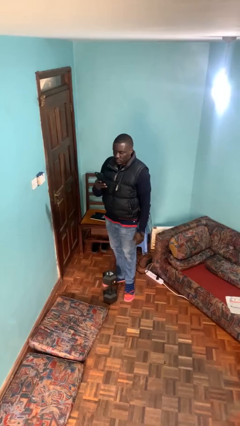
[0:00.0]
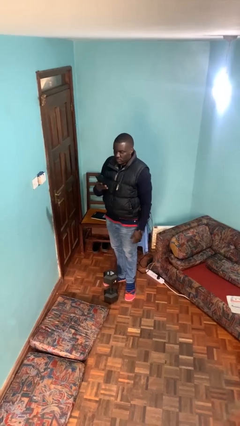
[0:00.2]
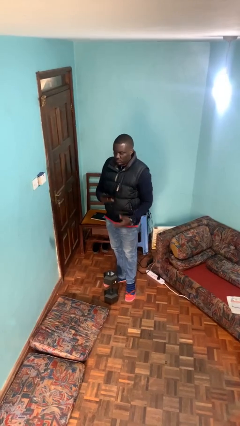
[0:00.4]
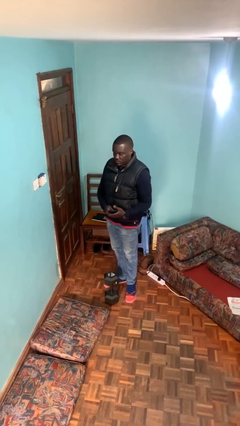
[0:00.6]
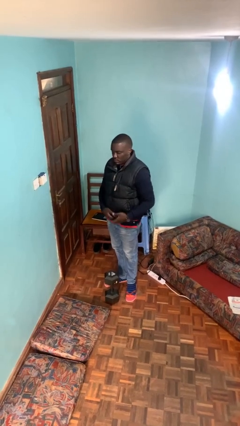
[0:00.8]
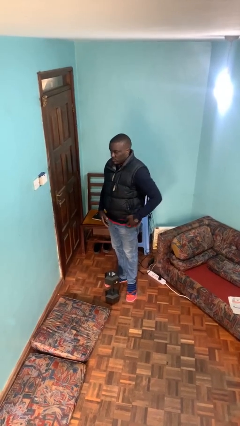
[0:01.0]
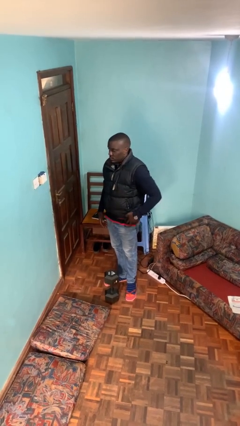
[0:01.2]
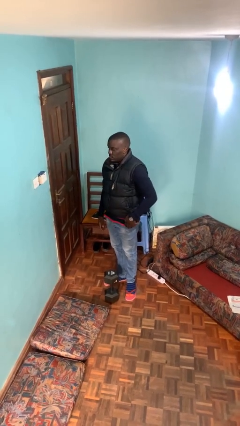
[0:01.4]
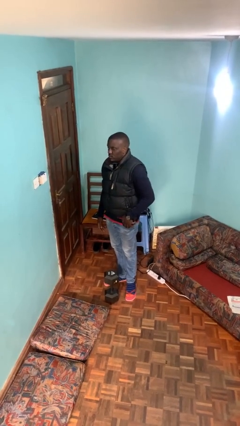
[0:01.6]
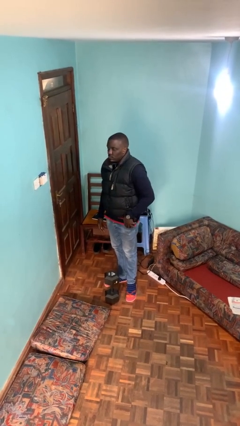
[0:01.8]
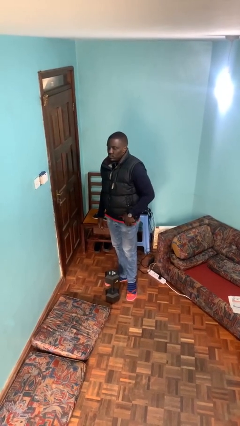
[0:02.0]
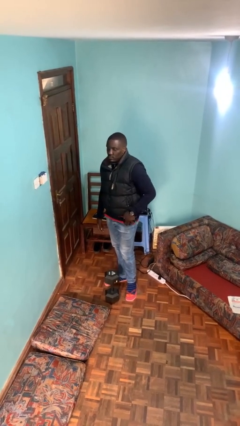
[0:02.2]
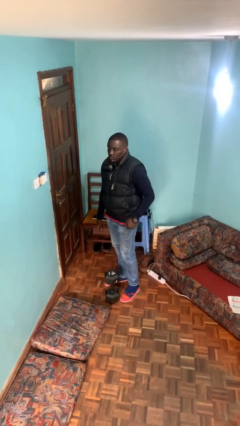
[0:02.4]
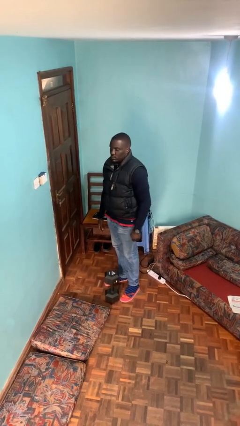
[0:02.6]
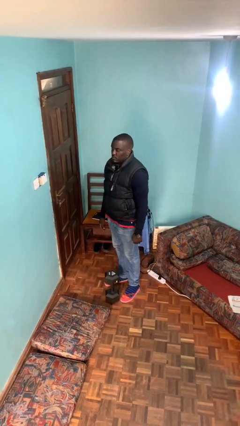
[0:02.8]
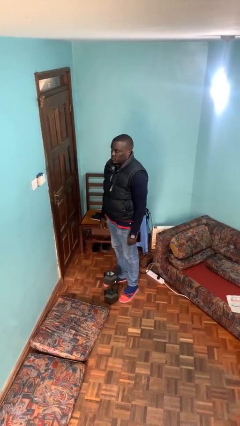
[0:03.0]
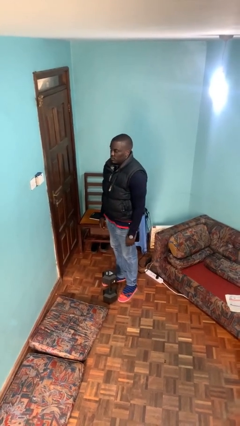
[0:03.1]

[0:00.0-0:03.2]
person puts phone into pocket

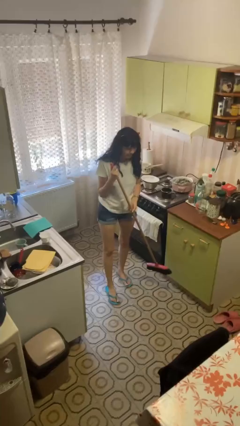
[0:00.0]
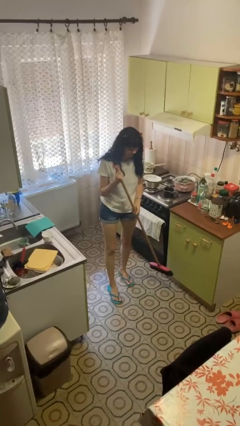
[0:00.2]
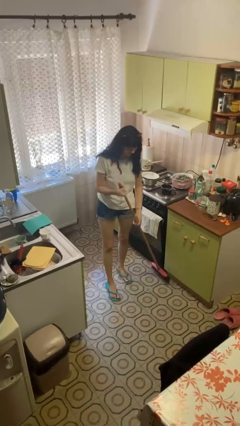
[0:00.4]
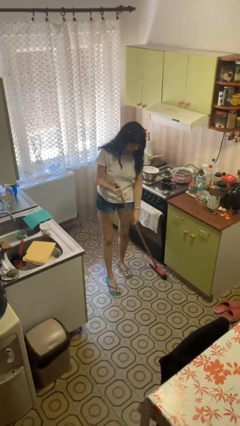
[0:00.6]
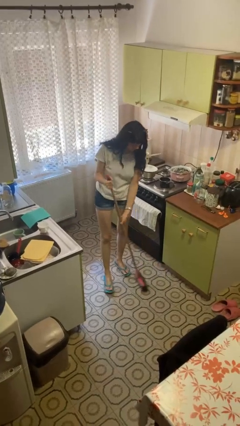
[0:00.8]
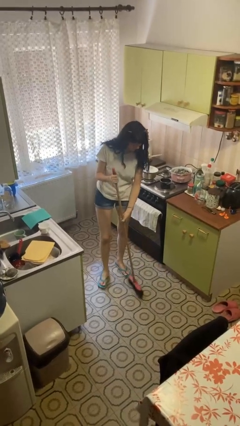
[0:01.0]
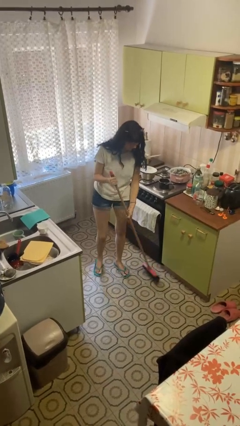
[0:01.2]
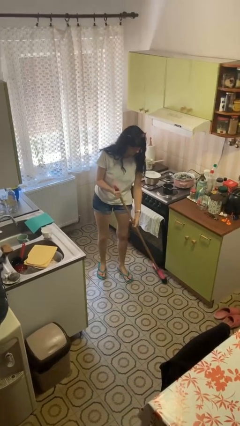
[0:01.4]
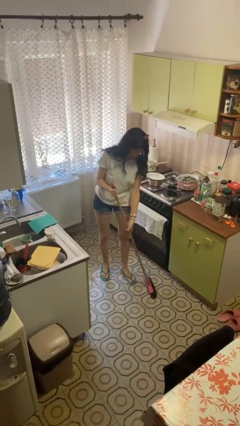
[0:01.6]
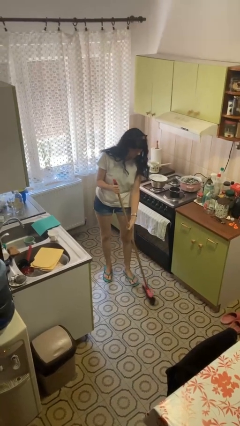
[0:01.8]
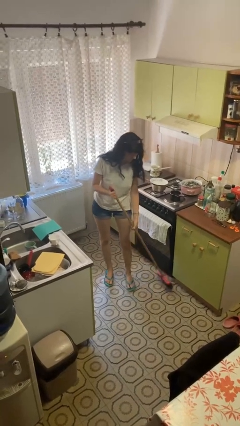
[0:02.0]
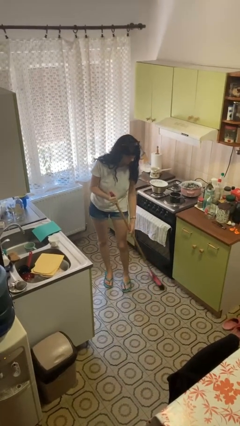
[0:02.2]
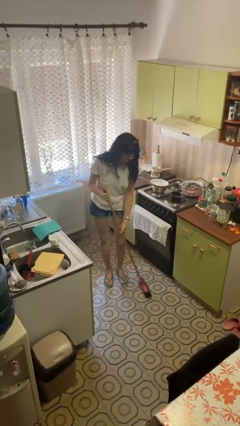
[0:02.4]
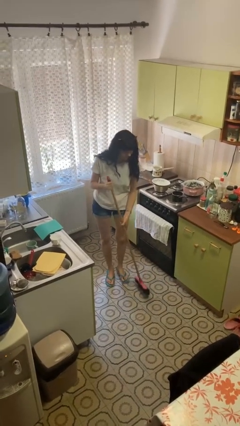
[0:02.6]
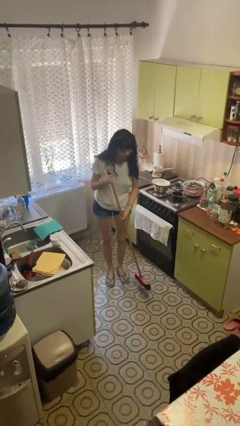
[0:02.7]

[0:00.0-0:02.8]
person sweeps floor

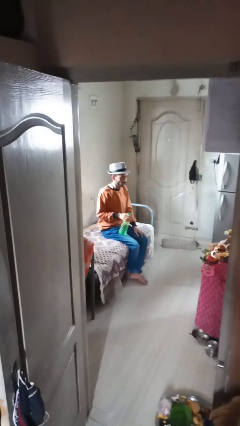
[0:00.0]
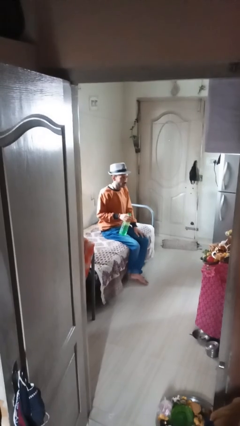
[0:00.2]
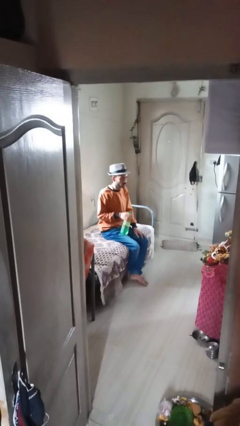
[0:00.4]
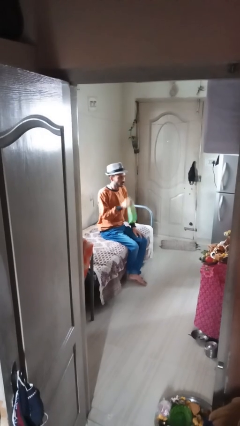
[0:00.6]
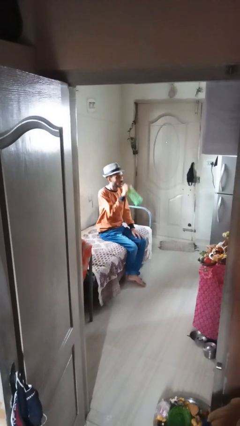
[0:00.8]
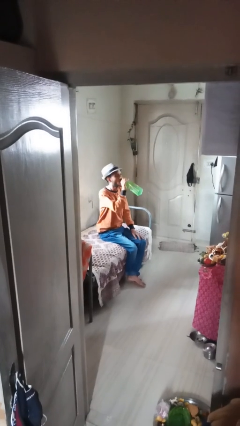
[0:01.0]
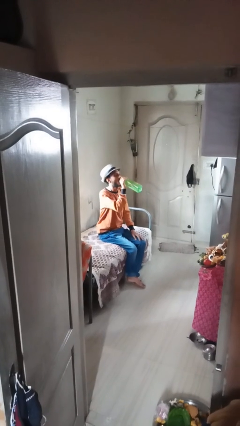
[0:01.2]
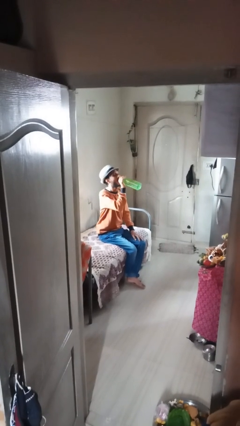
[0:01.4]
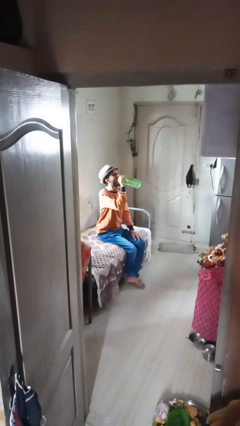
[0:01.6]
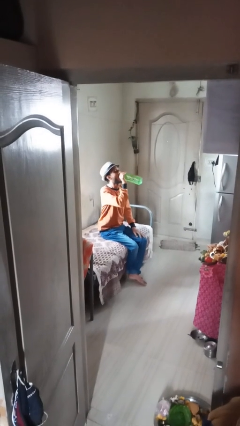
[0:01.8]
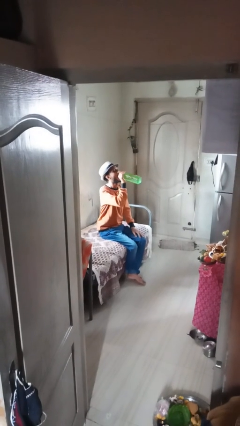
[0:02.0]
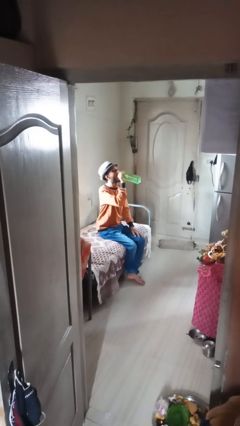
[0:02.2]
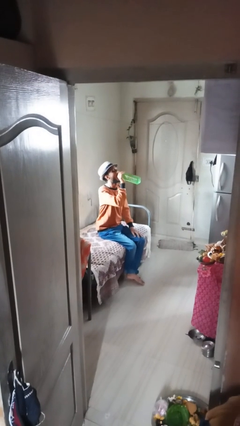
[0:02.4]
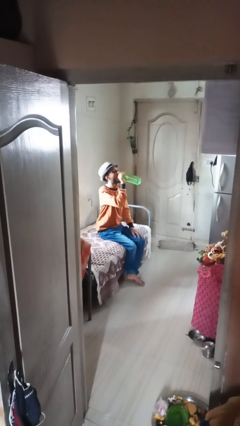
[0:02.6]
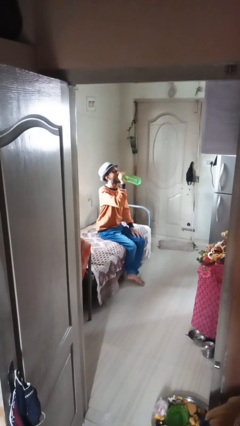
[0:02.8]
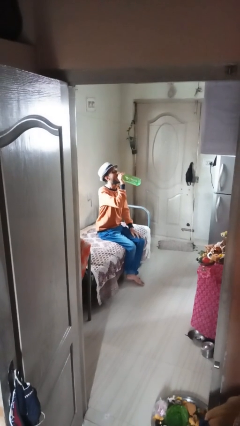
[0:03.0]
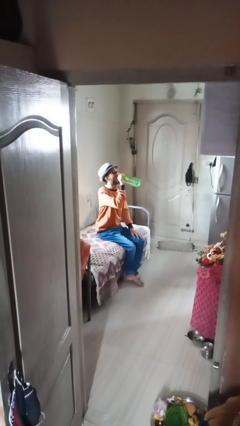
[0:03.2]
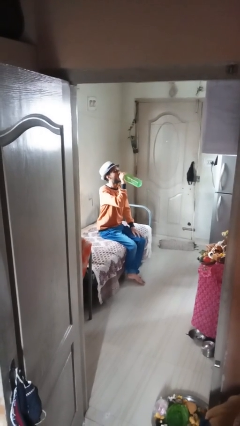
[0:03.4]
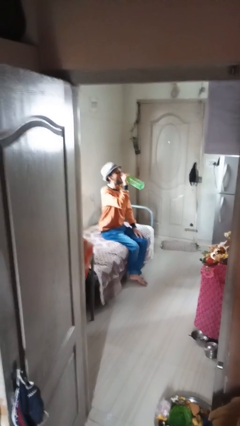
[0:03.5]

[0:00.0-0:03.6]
person drinks from bottle

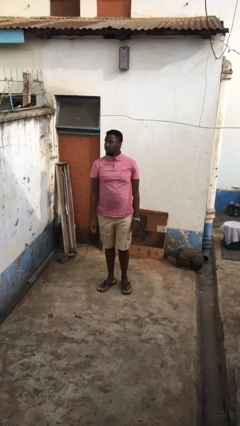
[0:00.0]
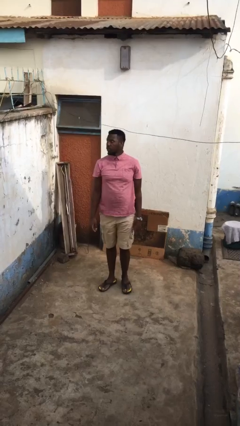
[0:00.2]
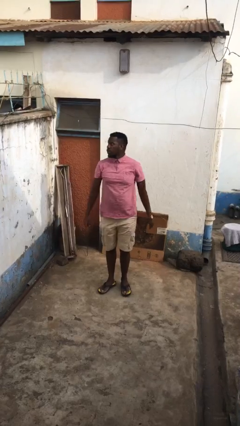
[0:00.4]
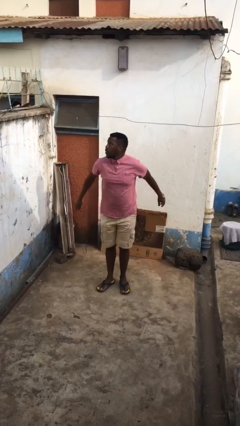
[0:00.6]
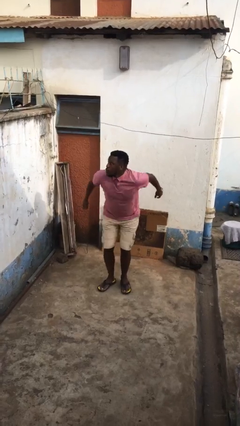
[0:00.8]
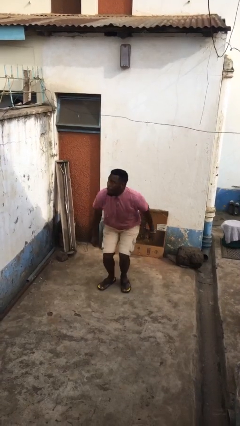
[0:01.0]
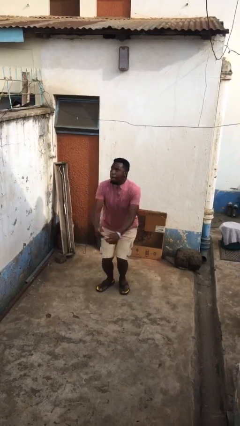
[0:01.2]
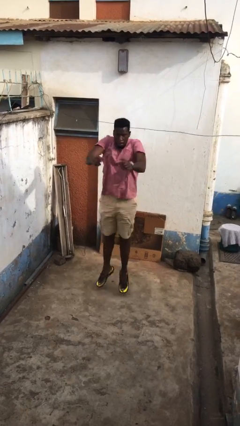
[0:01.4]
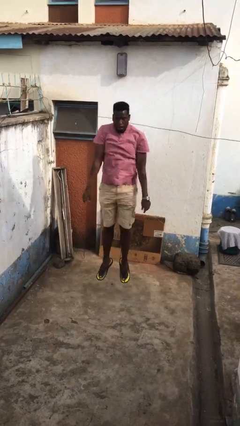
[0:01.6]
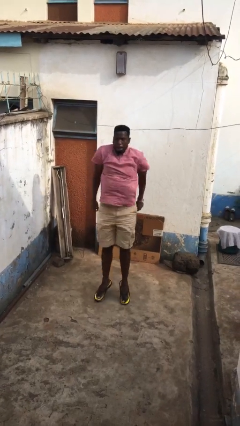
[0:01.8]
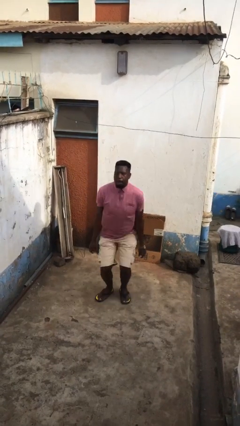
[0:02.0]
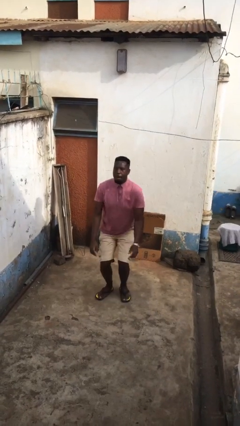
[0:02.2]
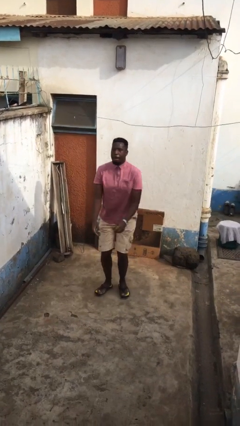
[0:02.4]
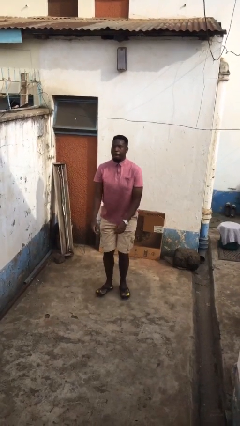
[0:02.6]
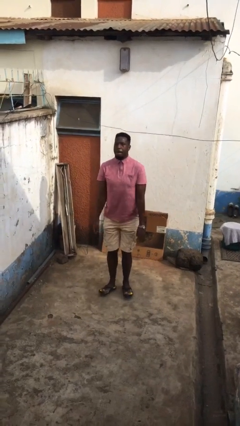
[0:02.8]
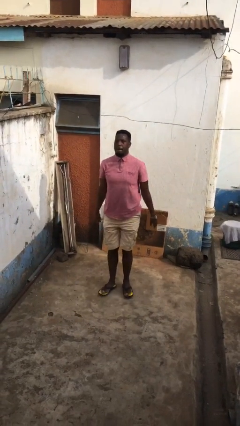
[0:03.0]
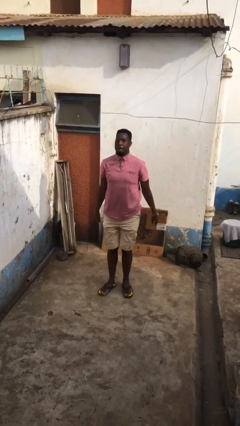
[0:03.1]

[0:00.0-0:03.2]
person jumps

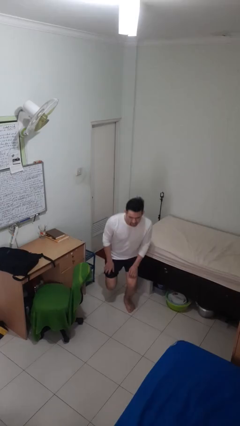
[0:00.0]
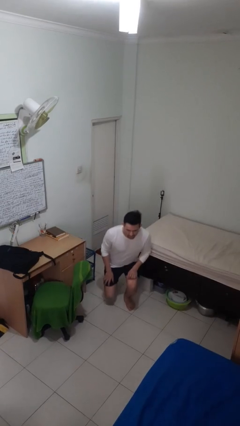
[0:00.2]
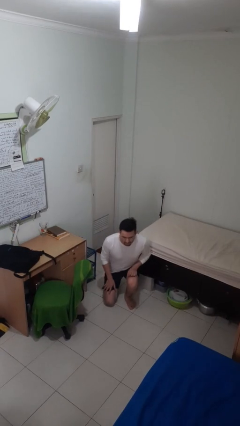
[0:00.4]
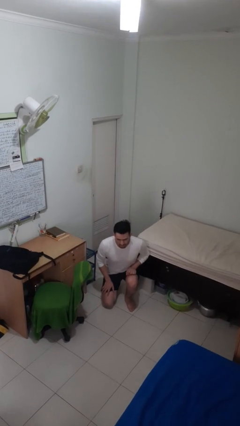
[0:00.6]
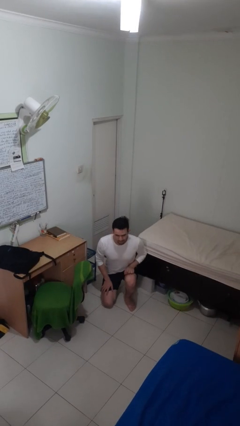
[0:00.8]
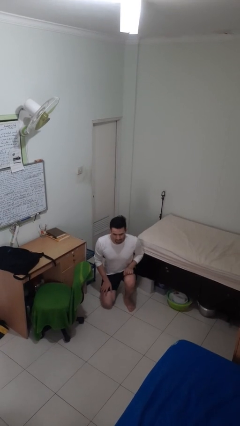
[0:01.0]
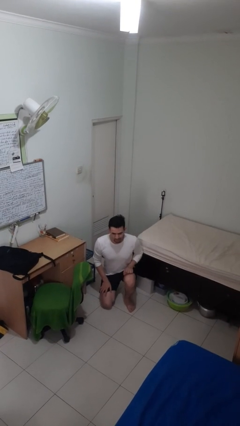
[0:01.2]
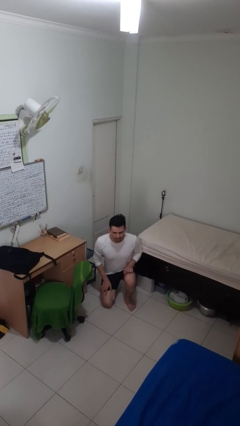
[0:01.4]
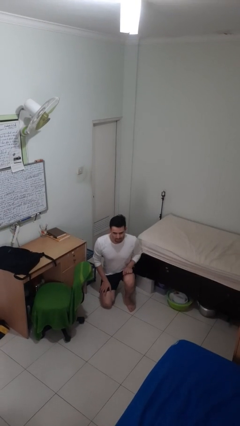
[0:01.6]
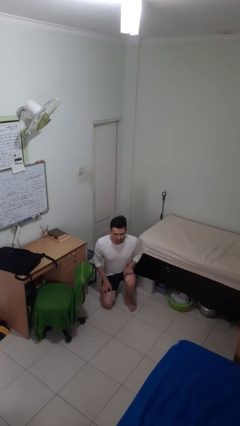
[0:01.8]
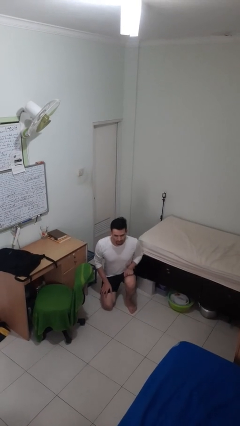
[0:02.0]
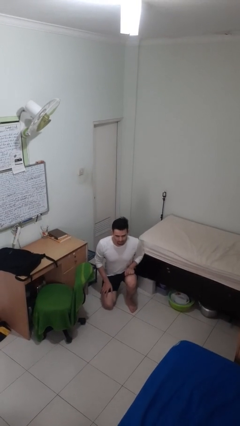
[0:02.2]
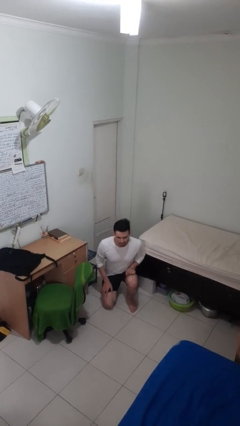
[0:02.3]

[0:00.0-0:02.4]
person kneels

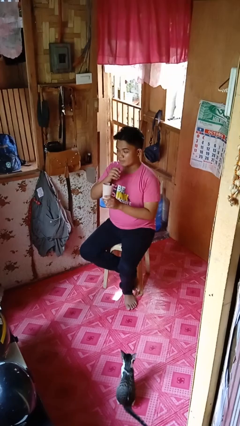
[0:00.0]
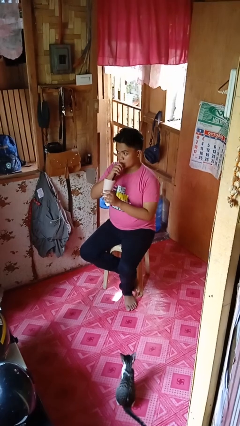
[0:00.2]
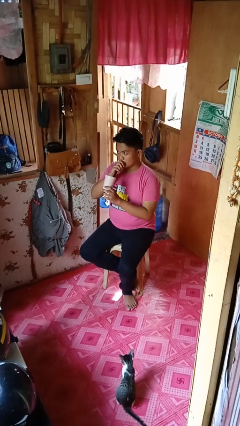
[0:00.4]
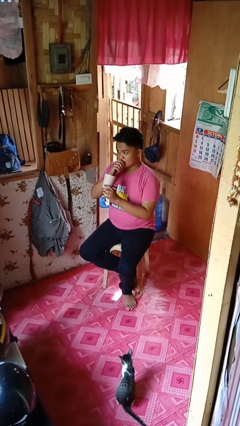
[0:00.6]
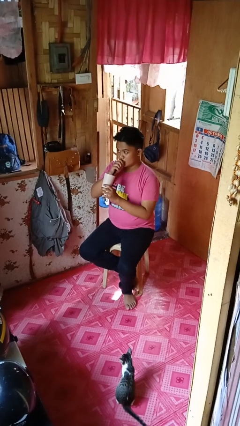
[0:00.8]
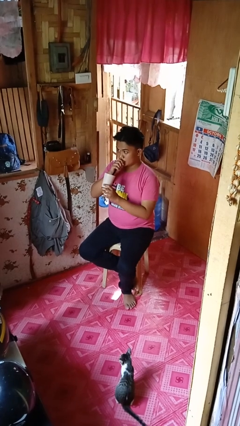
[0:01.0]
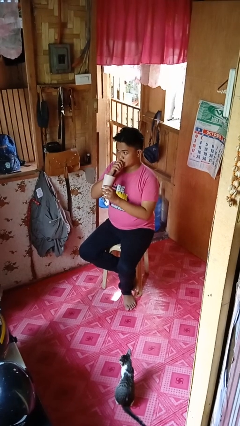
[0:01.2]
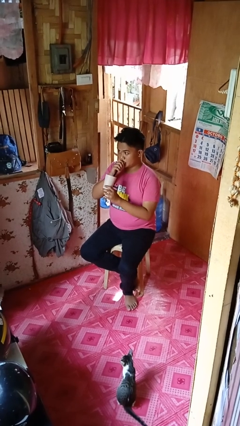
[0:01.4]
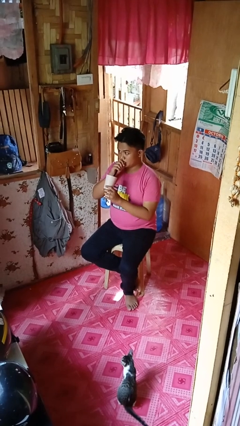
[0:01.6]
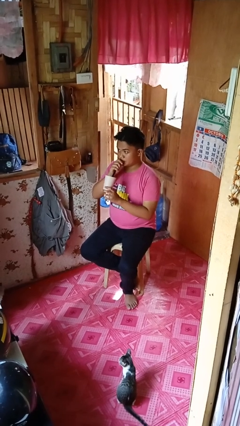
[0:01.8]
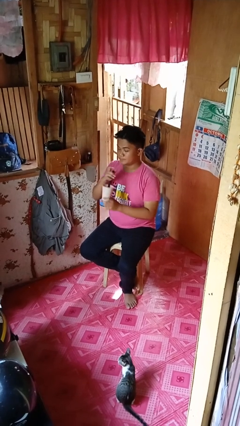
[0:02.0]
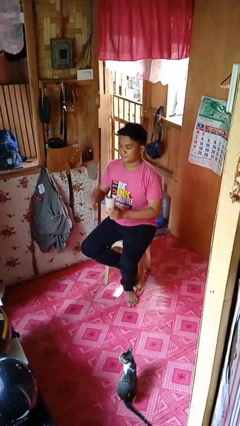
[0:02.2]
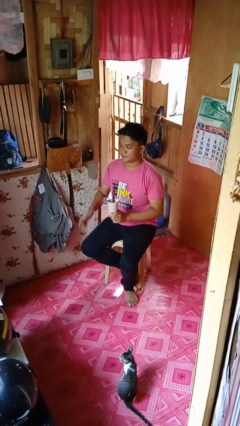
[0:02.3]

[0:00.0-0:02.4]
person drinks from straw
